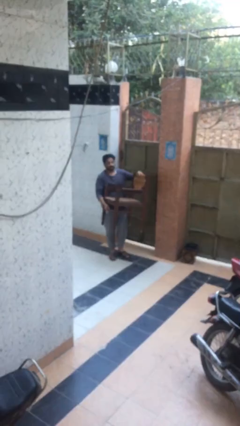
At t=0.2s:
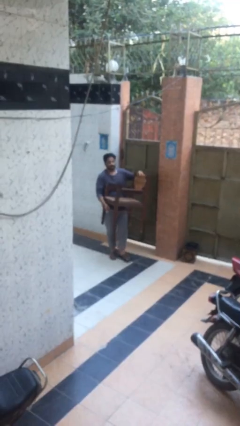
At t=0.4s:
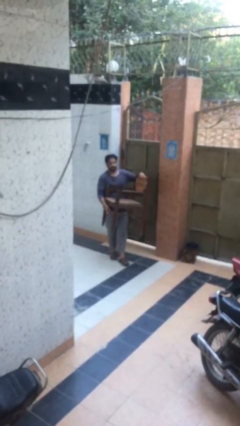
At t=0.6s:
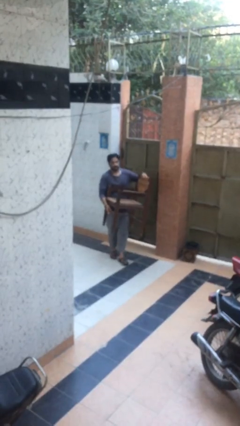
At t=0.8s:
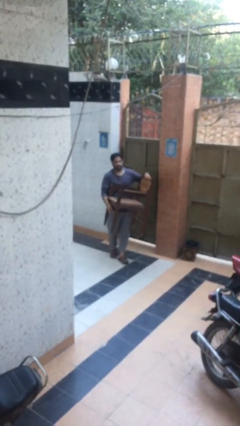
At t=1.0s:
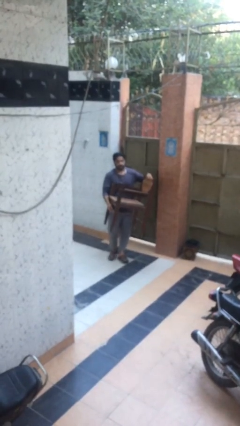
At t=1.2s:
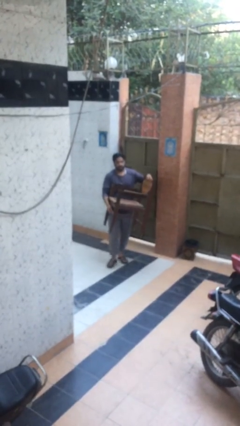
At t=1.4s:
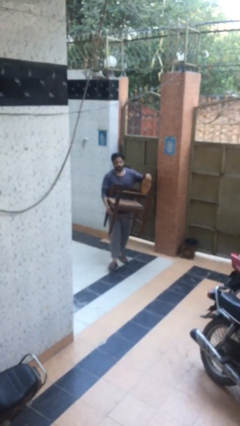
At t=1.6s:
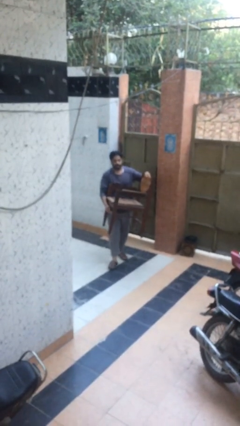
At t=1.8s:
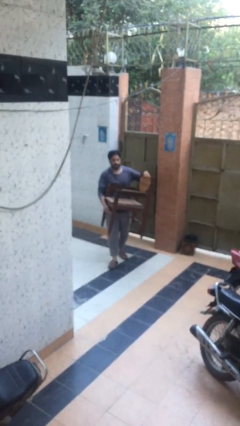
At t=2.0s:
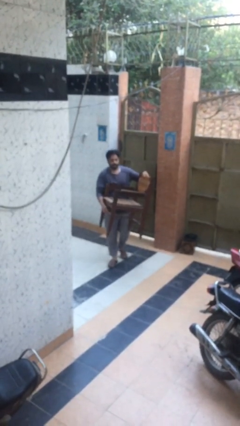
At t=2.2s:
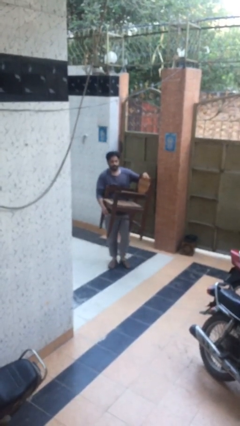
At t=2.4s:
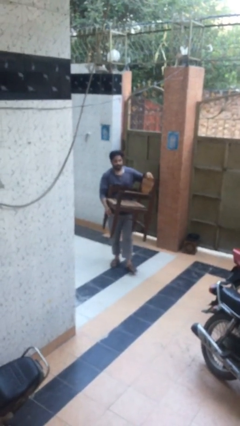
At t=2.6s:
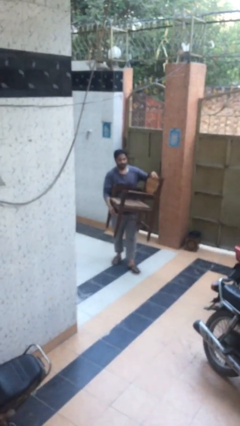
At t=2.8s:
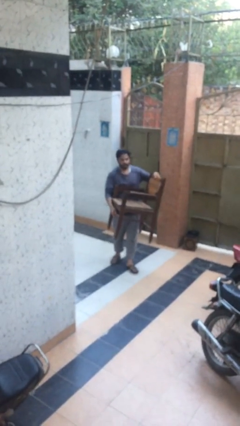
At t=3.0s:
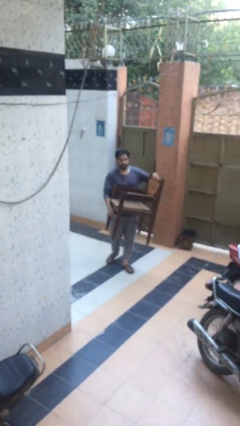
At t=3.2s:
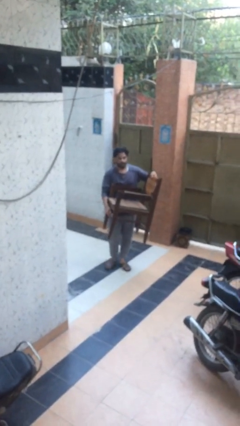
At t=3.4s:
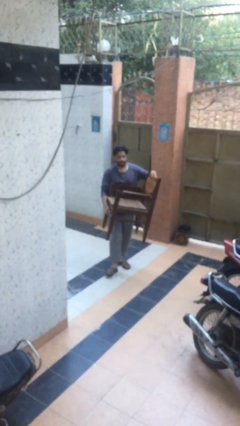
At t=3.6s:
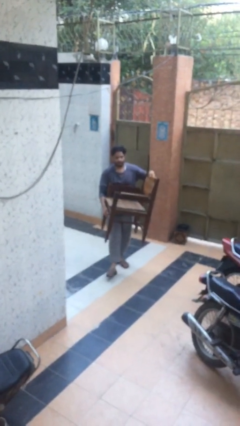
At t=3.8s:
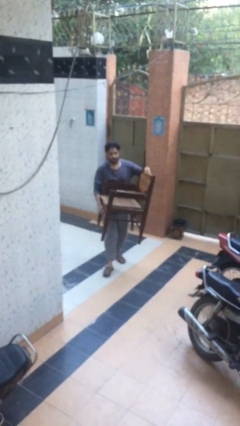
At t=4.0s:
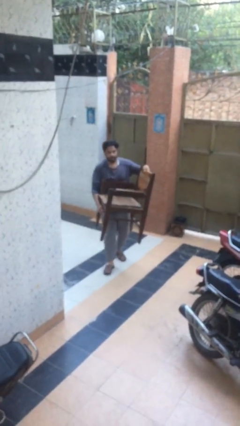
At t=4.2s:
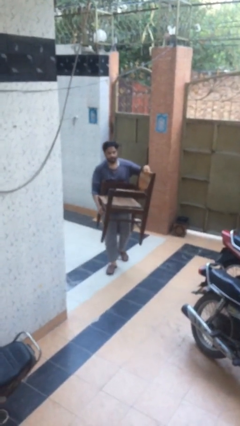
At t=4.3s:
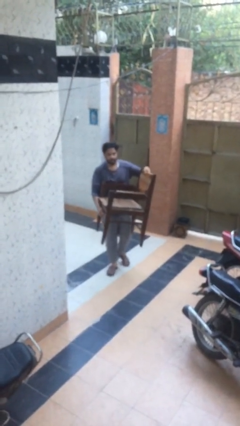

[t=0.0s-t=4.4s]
person carries heavy object

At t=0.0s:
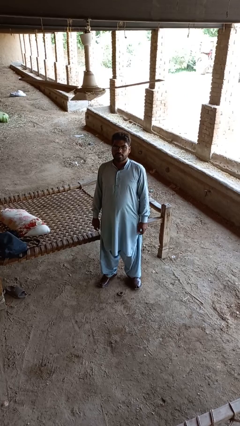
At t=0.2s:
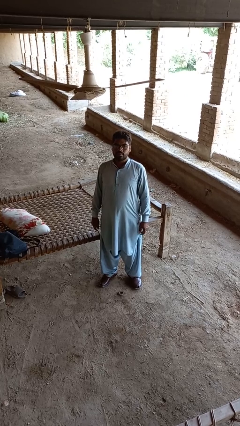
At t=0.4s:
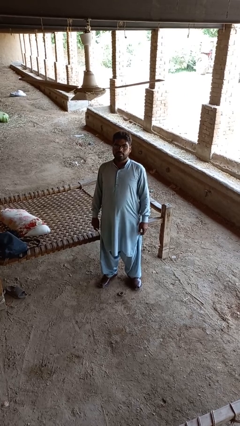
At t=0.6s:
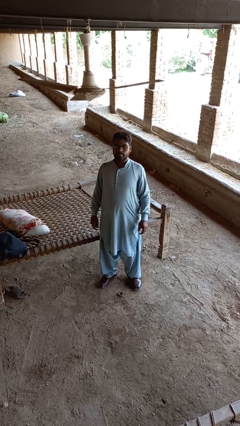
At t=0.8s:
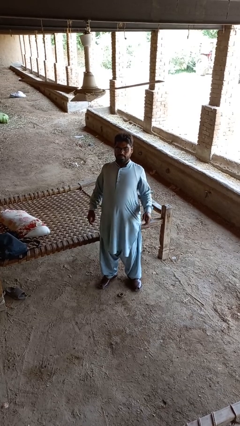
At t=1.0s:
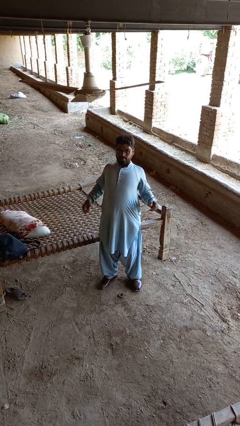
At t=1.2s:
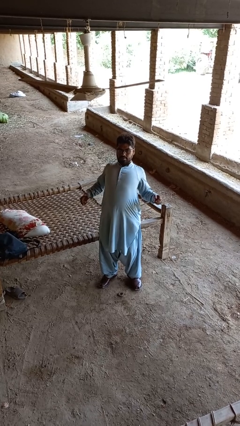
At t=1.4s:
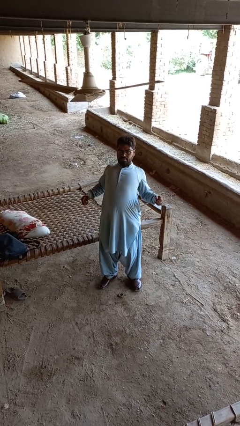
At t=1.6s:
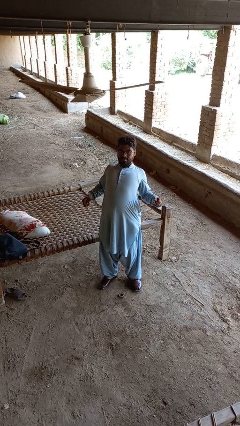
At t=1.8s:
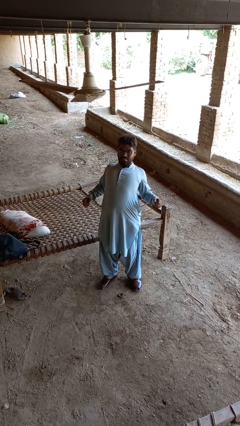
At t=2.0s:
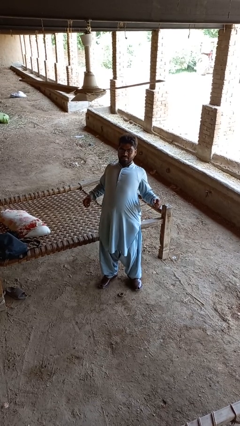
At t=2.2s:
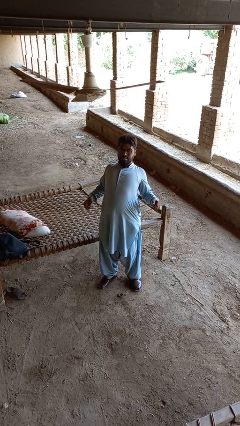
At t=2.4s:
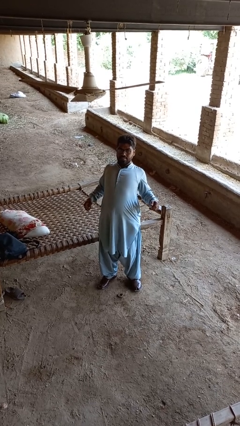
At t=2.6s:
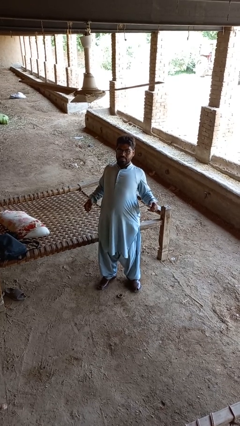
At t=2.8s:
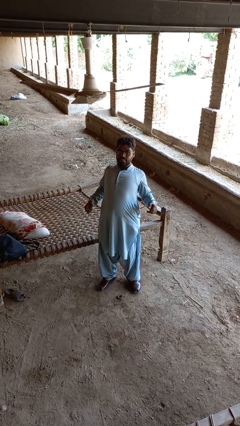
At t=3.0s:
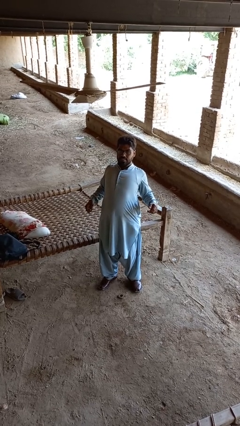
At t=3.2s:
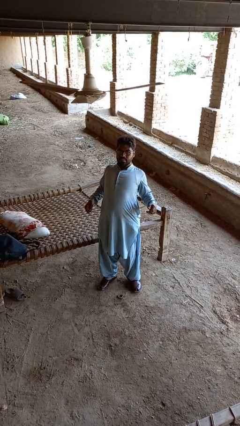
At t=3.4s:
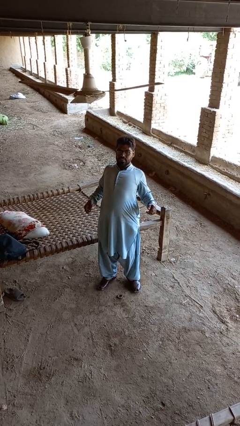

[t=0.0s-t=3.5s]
person stretches back

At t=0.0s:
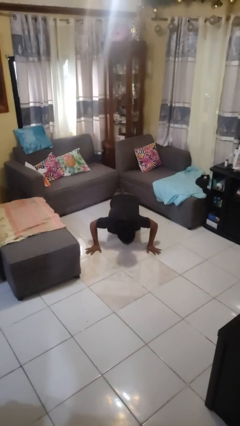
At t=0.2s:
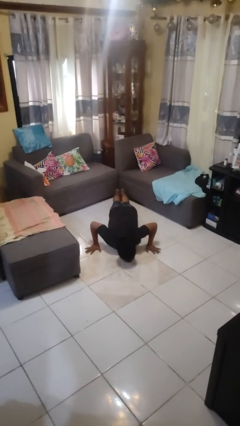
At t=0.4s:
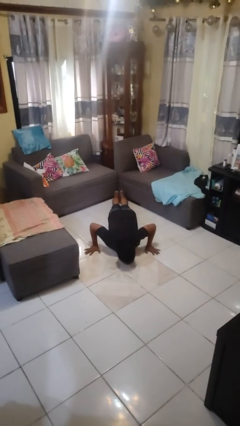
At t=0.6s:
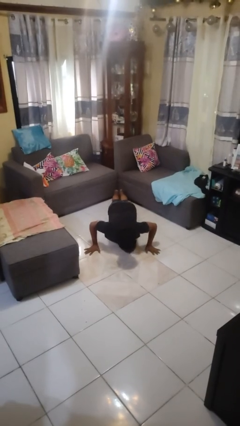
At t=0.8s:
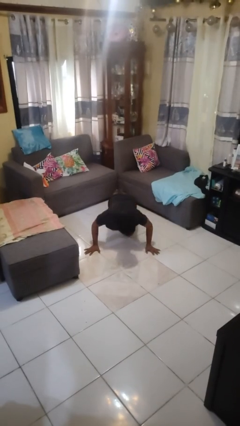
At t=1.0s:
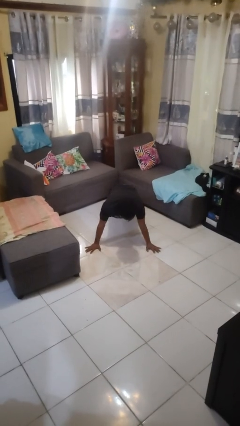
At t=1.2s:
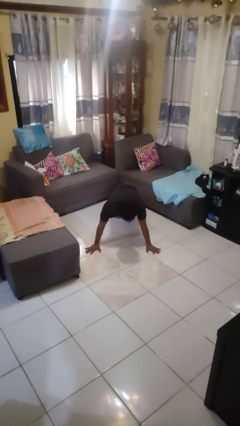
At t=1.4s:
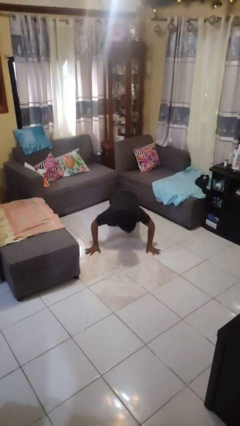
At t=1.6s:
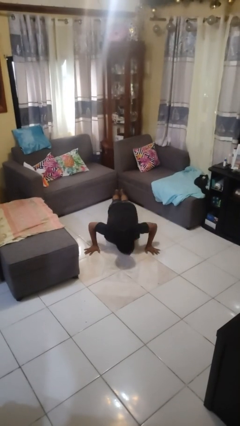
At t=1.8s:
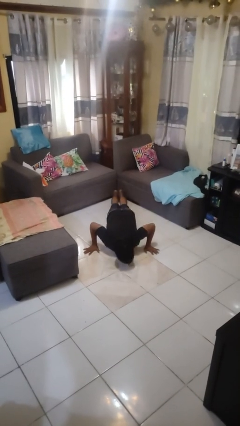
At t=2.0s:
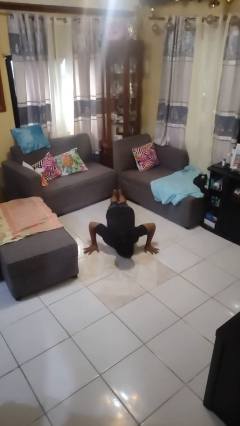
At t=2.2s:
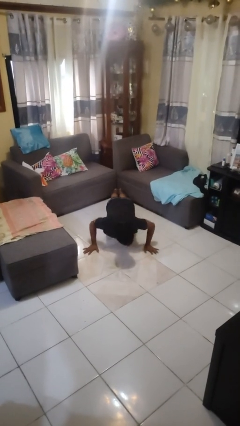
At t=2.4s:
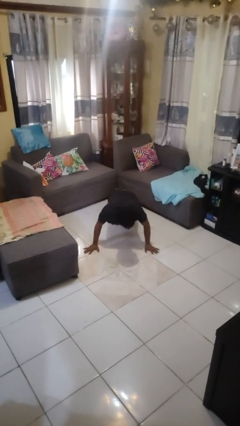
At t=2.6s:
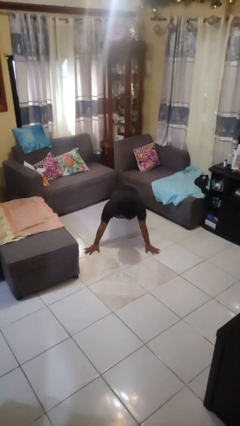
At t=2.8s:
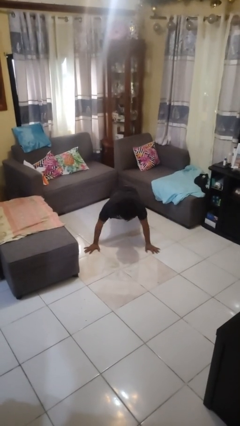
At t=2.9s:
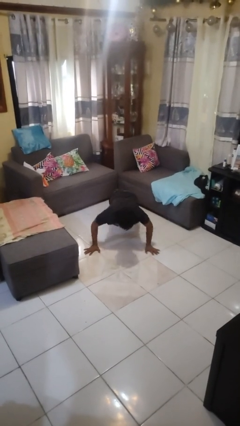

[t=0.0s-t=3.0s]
person exercises with pushup

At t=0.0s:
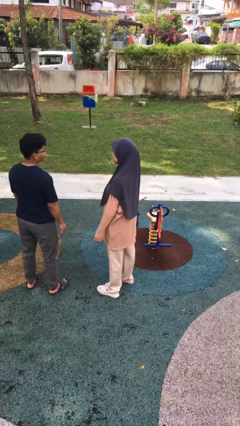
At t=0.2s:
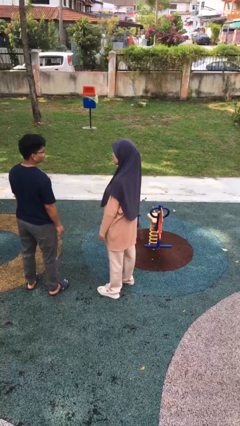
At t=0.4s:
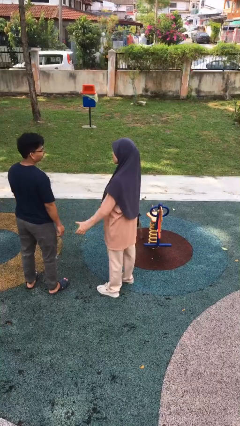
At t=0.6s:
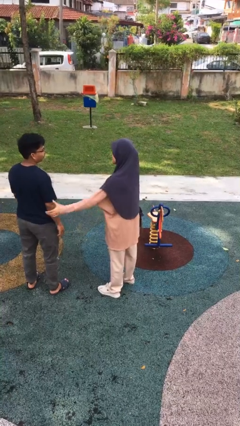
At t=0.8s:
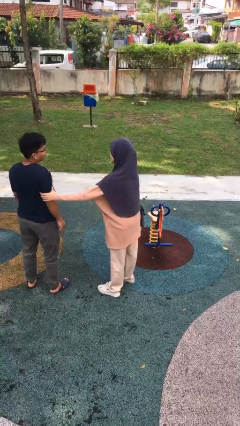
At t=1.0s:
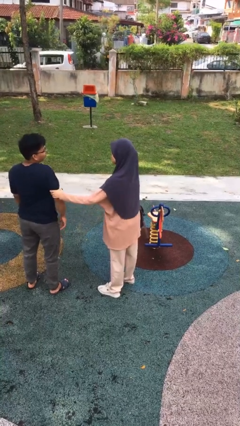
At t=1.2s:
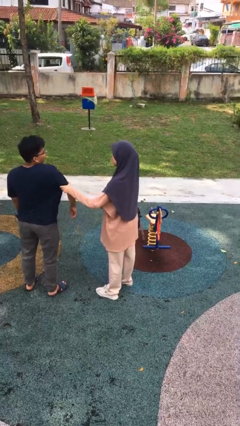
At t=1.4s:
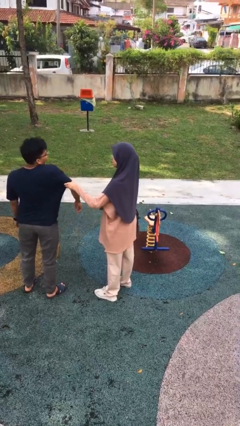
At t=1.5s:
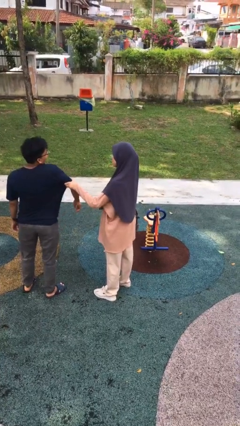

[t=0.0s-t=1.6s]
person grabs person by bicep

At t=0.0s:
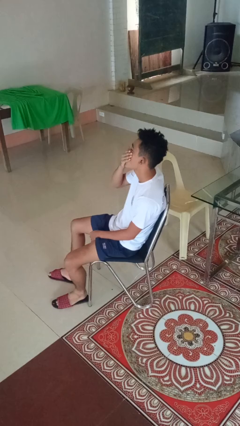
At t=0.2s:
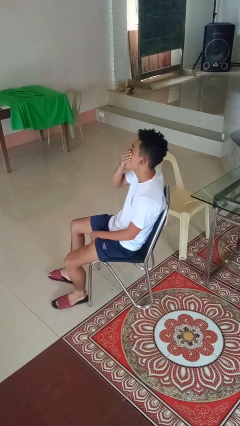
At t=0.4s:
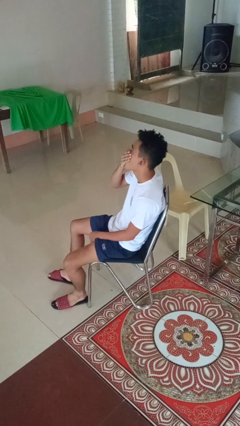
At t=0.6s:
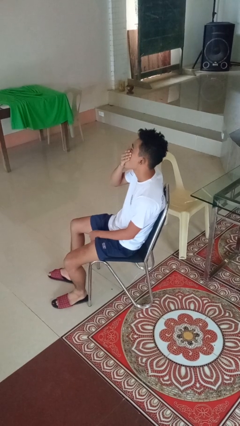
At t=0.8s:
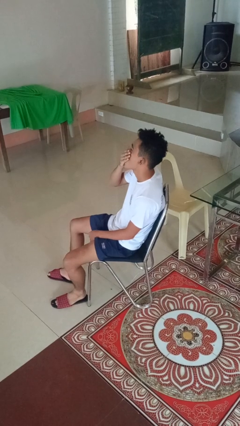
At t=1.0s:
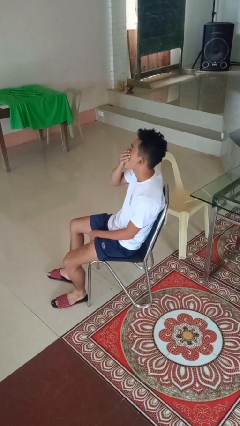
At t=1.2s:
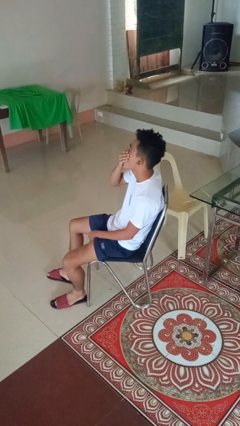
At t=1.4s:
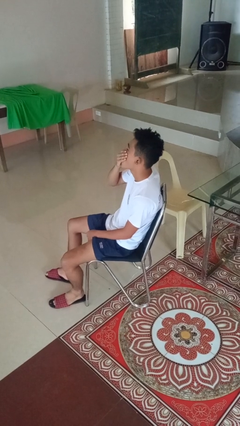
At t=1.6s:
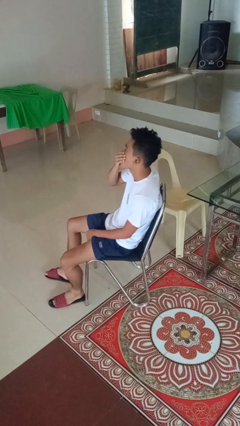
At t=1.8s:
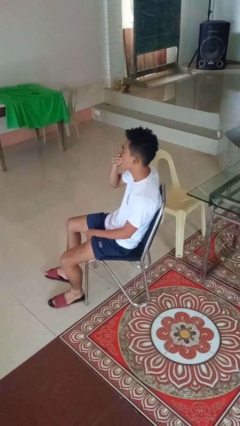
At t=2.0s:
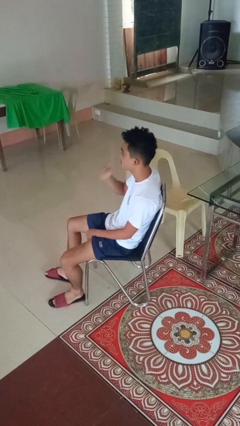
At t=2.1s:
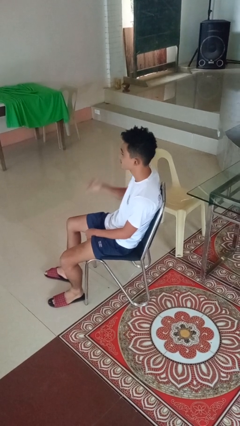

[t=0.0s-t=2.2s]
person yawns

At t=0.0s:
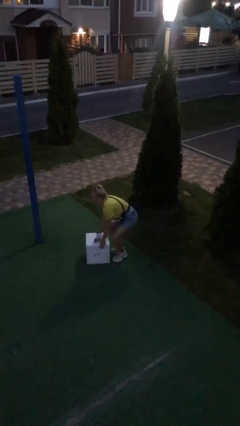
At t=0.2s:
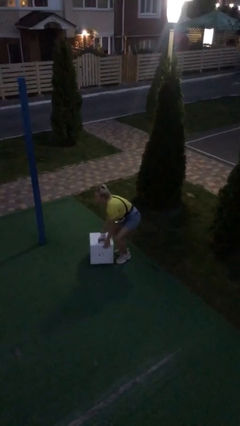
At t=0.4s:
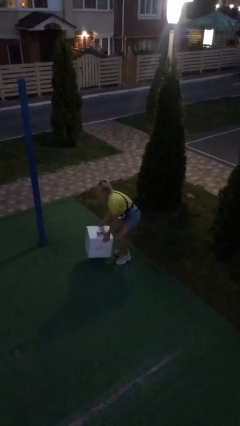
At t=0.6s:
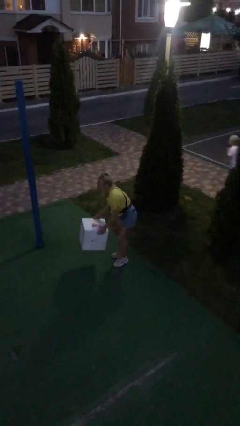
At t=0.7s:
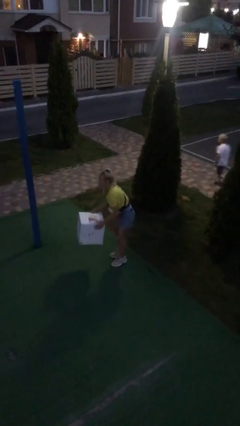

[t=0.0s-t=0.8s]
person picks up object from floor

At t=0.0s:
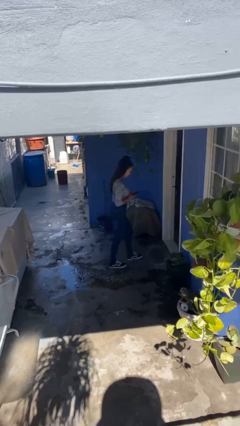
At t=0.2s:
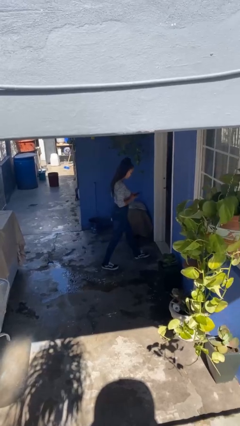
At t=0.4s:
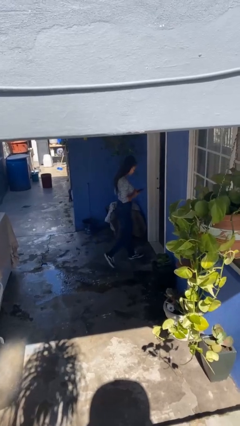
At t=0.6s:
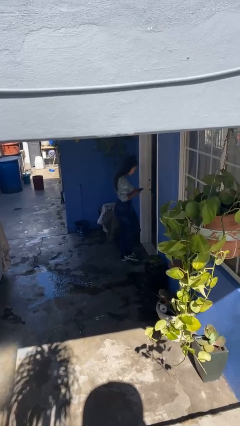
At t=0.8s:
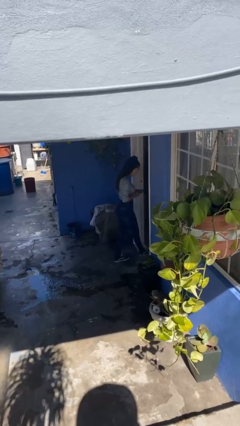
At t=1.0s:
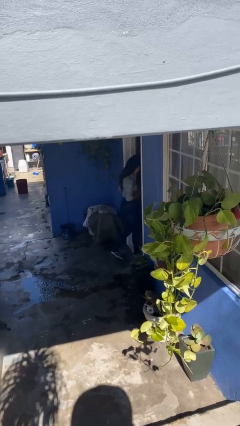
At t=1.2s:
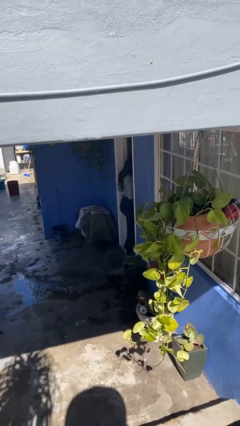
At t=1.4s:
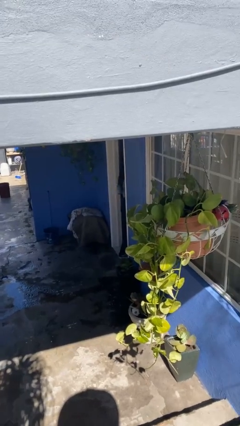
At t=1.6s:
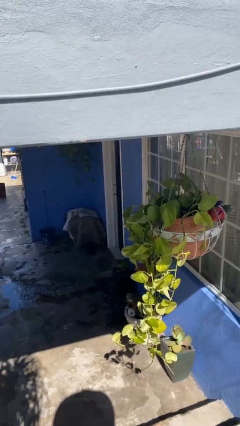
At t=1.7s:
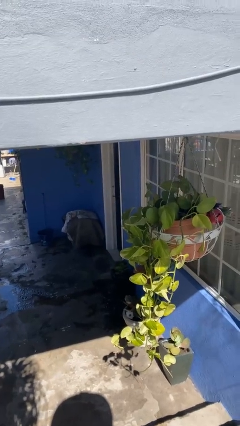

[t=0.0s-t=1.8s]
person exits scene through structure
